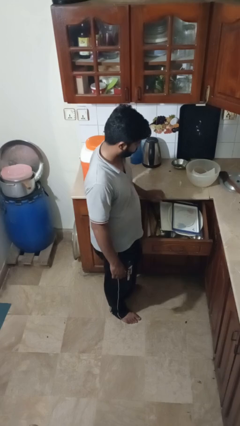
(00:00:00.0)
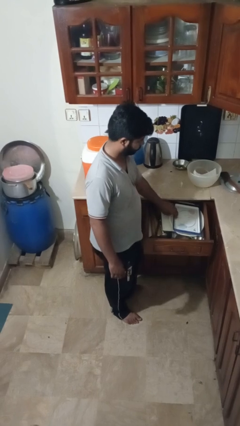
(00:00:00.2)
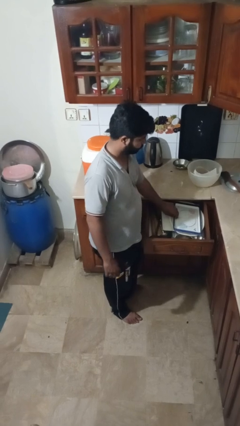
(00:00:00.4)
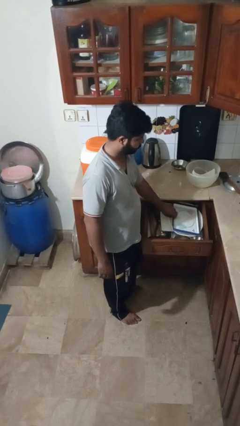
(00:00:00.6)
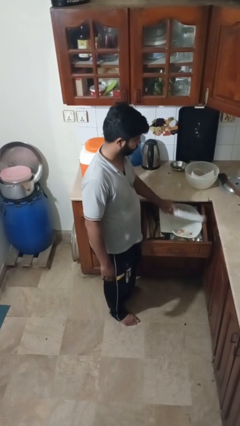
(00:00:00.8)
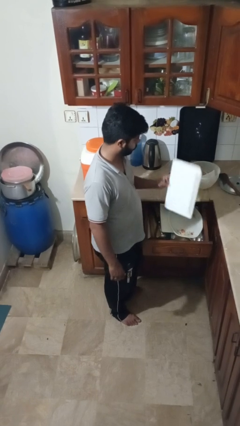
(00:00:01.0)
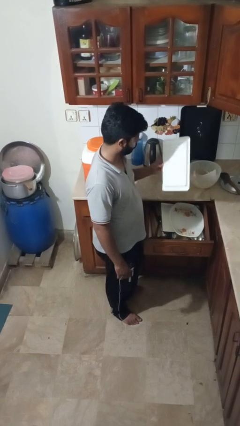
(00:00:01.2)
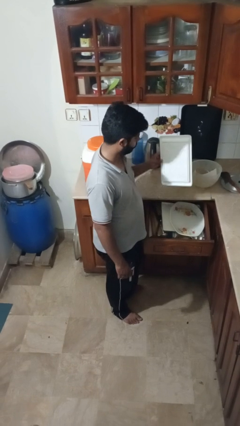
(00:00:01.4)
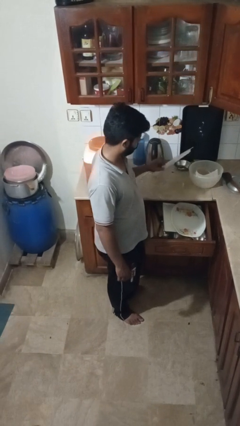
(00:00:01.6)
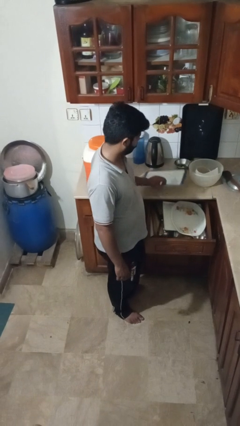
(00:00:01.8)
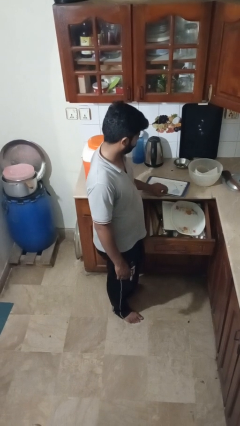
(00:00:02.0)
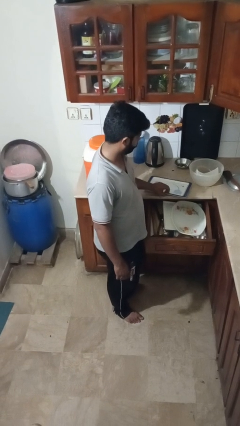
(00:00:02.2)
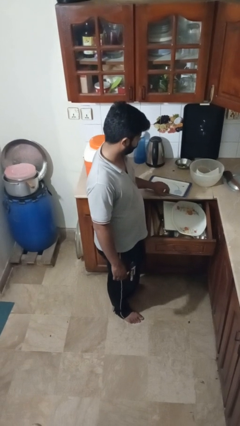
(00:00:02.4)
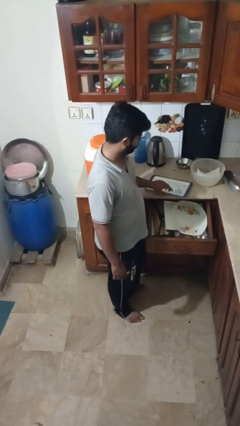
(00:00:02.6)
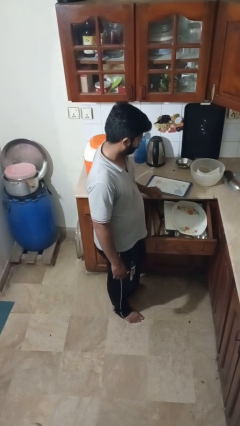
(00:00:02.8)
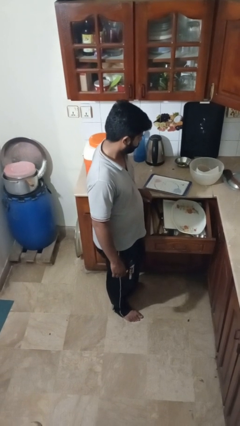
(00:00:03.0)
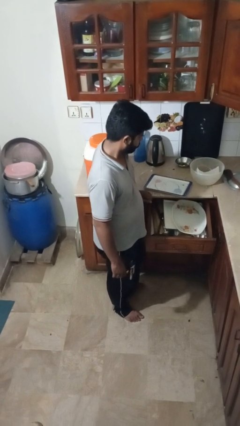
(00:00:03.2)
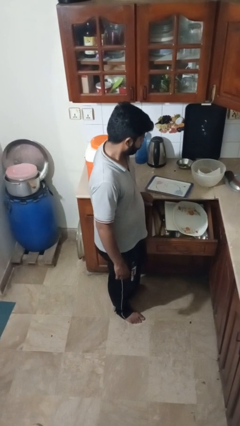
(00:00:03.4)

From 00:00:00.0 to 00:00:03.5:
person takes object from kitchen drawer

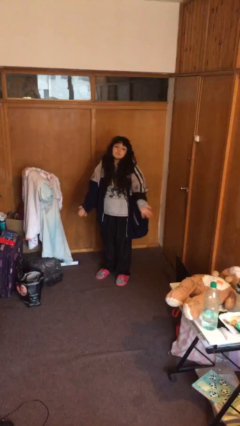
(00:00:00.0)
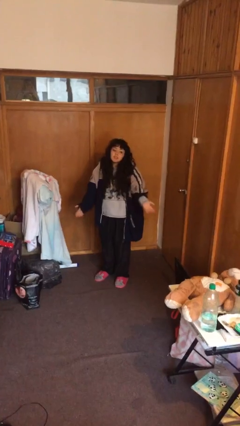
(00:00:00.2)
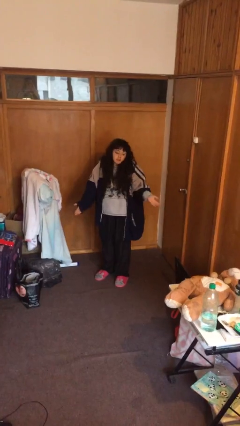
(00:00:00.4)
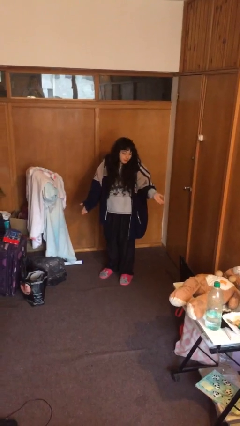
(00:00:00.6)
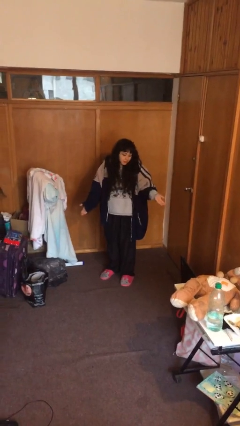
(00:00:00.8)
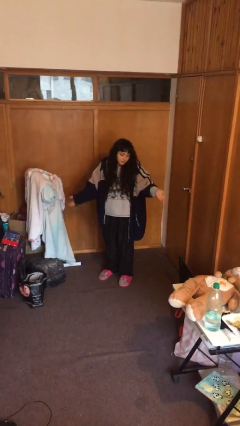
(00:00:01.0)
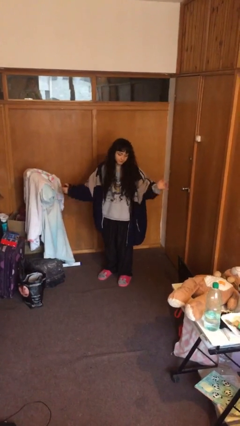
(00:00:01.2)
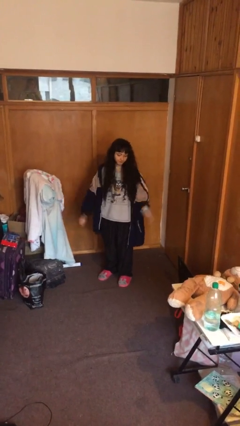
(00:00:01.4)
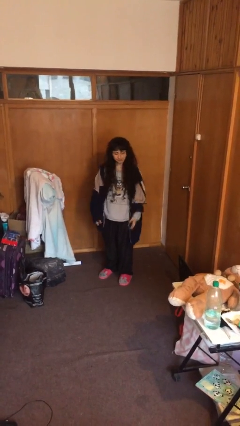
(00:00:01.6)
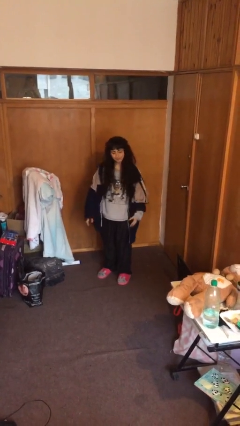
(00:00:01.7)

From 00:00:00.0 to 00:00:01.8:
person shrugs

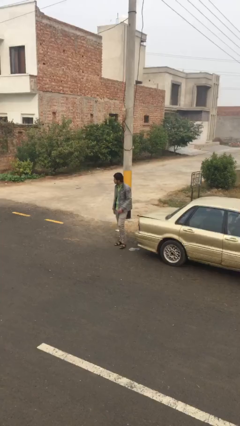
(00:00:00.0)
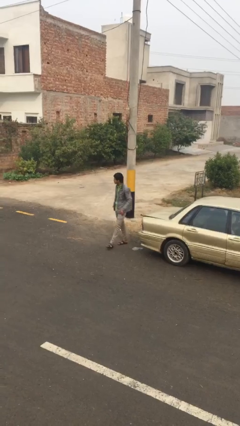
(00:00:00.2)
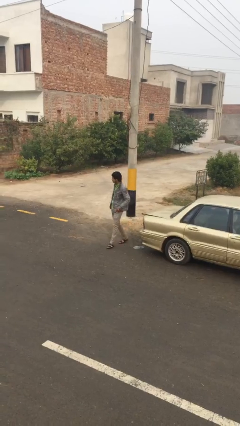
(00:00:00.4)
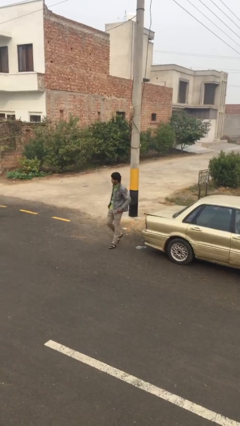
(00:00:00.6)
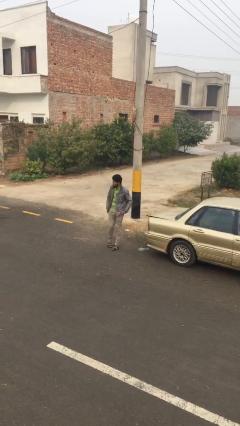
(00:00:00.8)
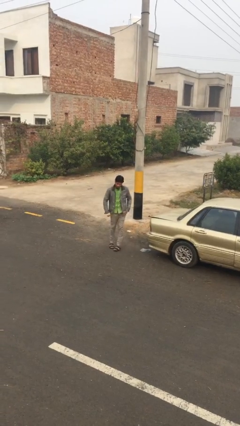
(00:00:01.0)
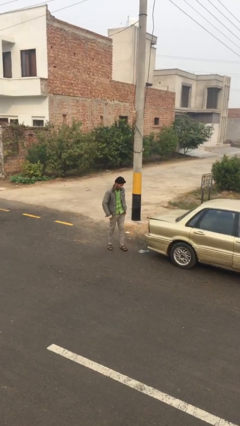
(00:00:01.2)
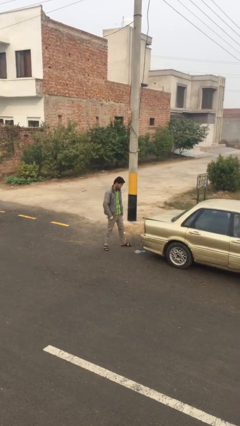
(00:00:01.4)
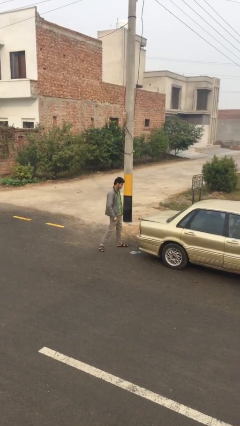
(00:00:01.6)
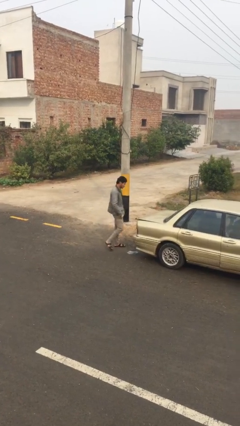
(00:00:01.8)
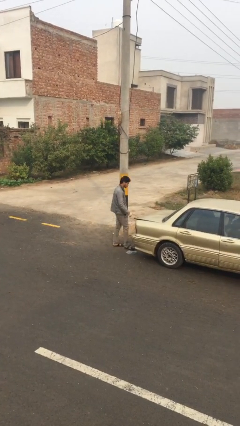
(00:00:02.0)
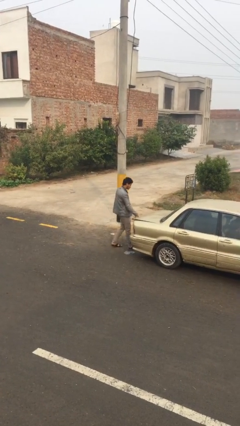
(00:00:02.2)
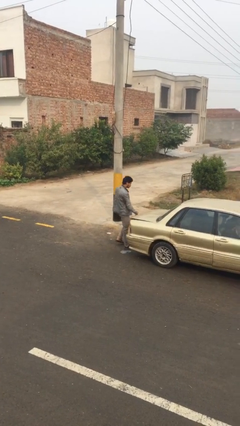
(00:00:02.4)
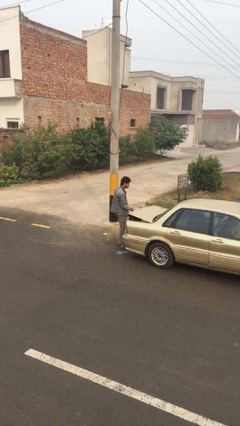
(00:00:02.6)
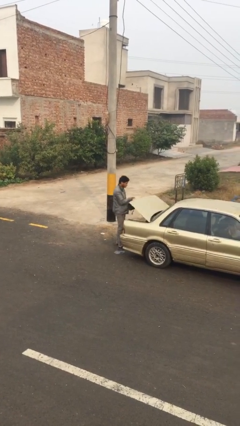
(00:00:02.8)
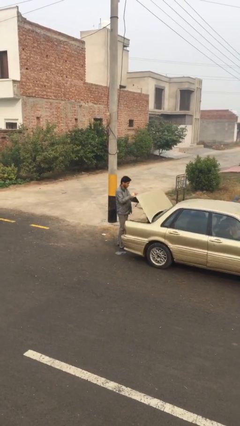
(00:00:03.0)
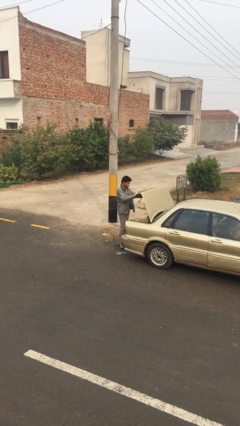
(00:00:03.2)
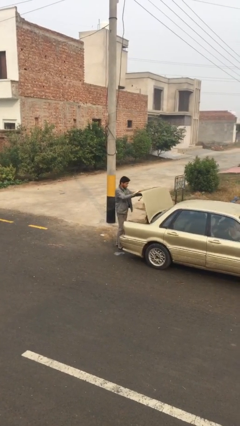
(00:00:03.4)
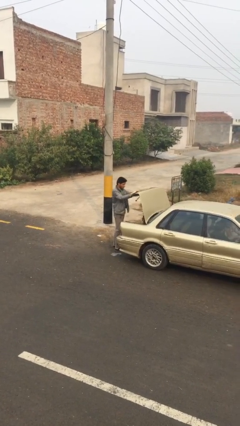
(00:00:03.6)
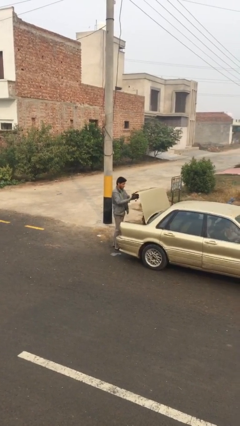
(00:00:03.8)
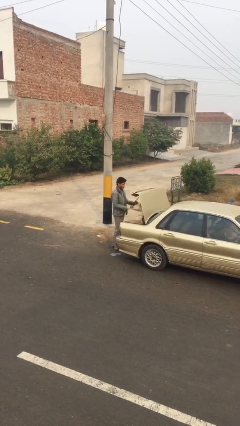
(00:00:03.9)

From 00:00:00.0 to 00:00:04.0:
person opens car trunk

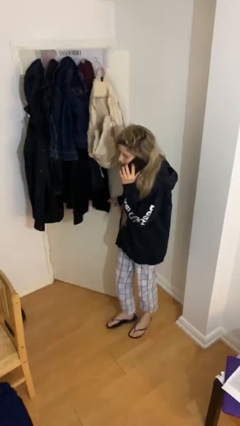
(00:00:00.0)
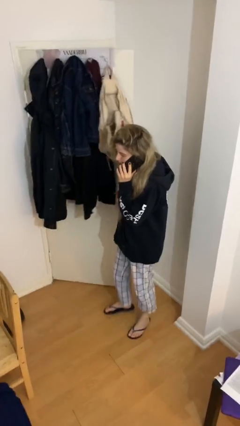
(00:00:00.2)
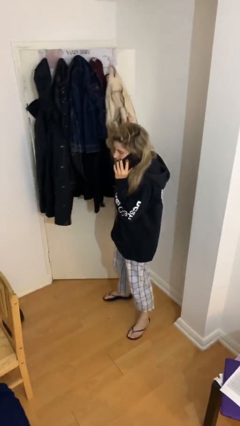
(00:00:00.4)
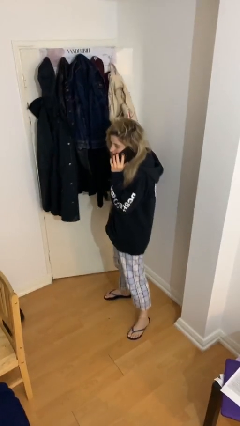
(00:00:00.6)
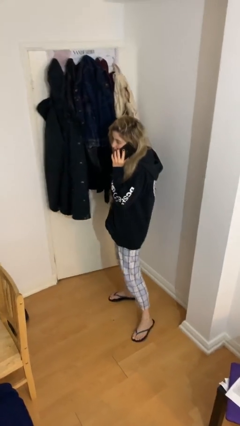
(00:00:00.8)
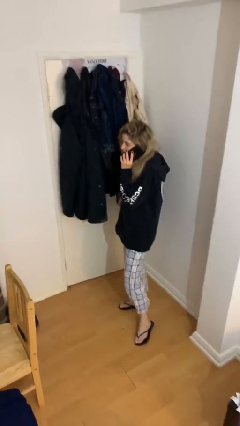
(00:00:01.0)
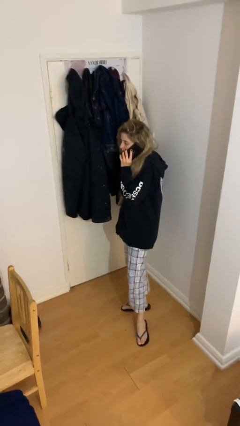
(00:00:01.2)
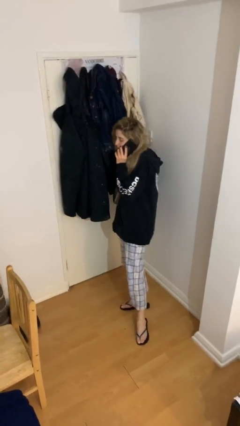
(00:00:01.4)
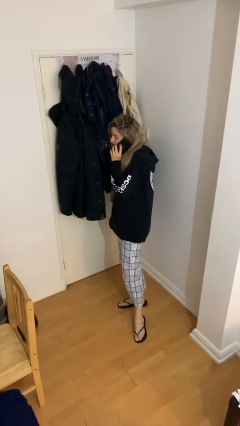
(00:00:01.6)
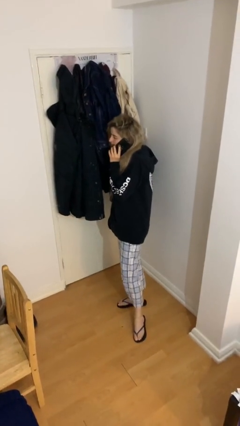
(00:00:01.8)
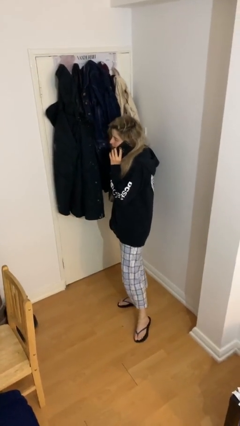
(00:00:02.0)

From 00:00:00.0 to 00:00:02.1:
person closes facility door

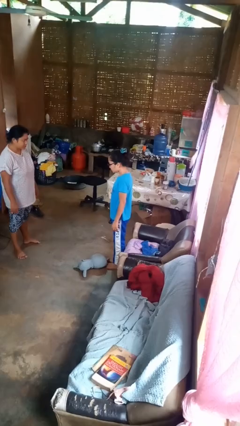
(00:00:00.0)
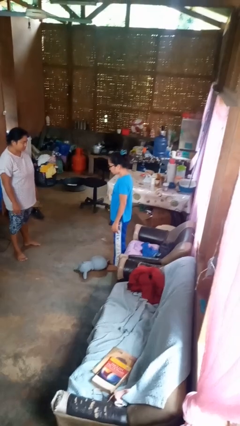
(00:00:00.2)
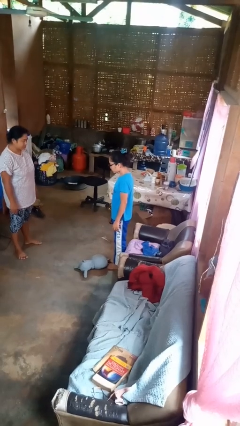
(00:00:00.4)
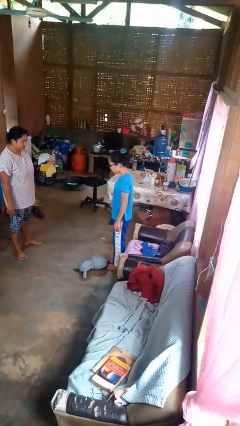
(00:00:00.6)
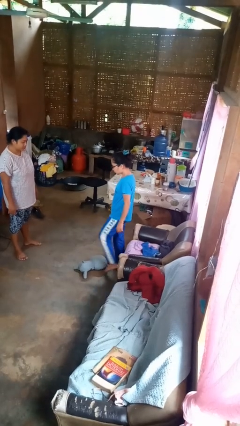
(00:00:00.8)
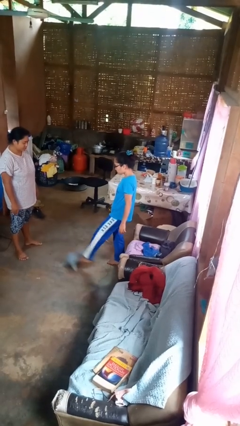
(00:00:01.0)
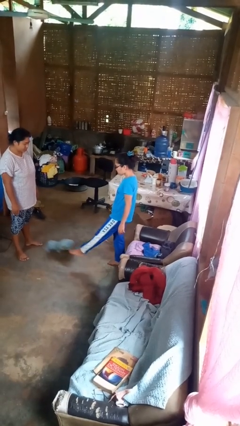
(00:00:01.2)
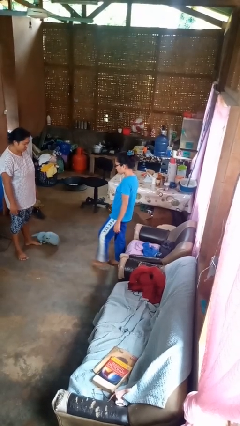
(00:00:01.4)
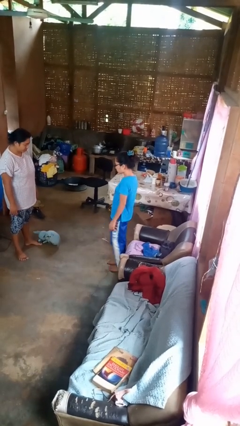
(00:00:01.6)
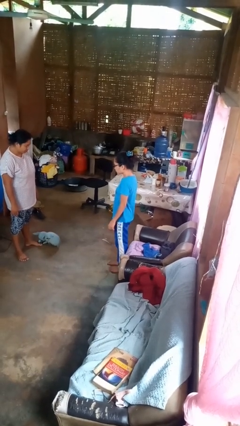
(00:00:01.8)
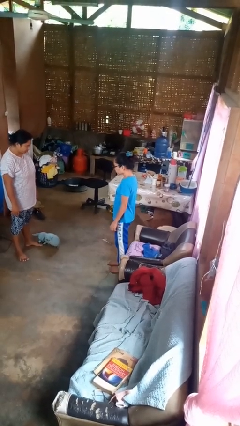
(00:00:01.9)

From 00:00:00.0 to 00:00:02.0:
person kicks object to person

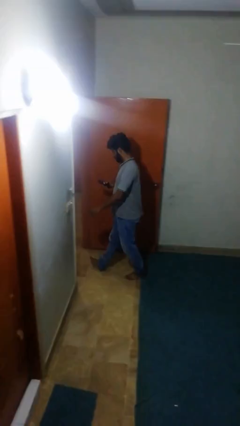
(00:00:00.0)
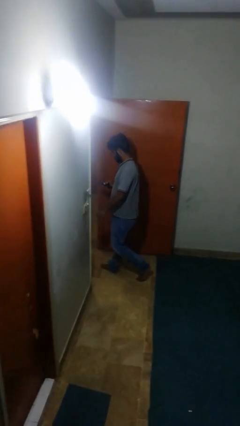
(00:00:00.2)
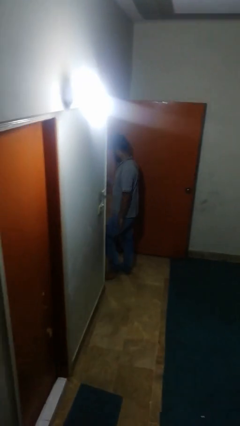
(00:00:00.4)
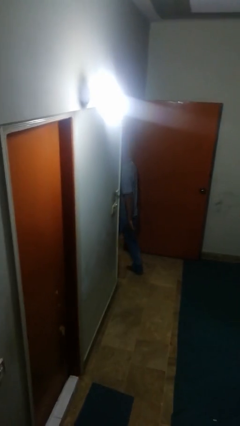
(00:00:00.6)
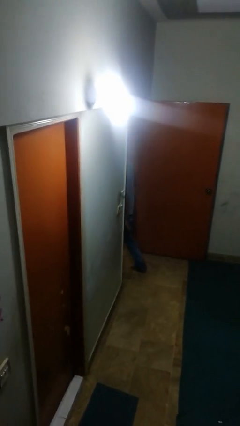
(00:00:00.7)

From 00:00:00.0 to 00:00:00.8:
person exits scene through structure

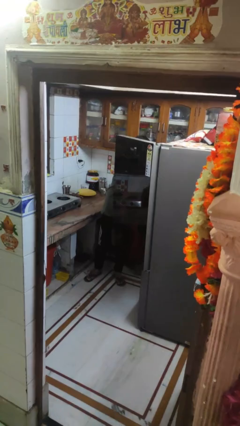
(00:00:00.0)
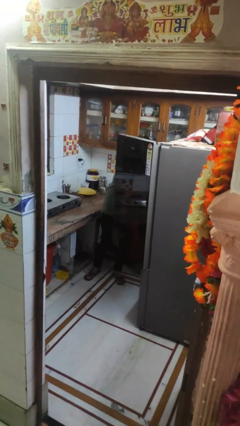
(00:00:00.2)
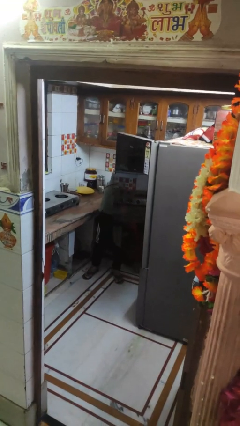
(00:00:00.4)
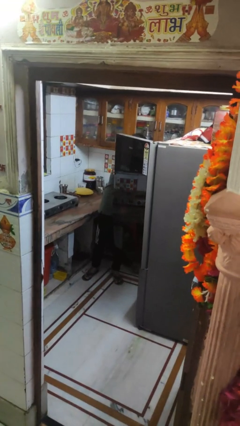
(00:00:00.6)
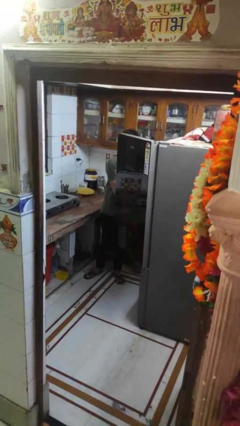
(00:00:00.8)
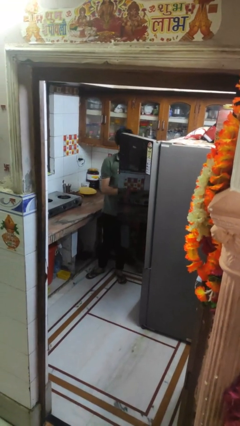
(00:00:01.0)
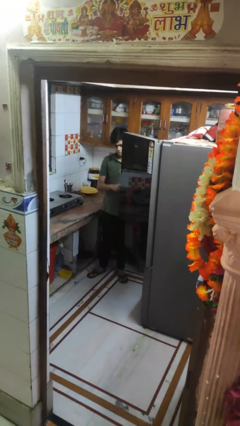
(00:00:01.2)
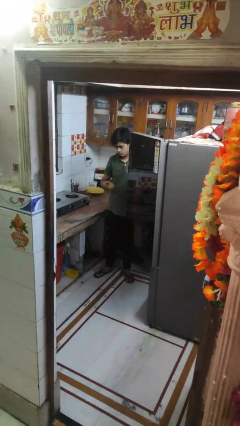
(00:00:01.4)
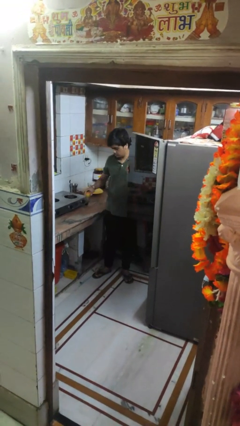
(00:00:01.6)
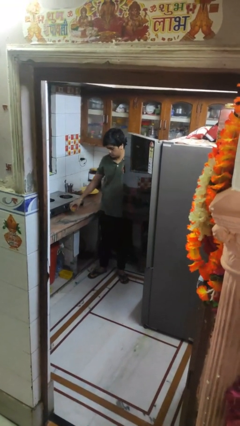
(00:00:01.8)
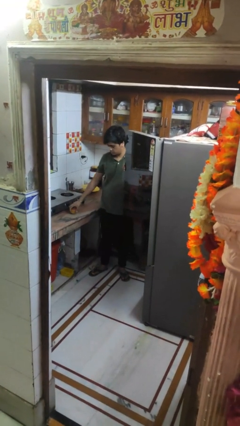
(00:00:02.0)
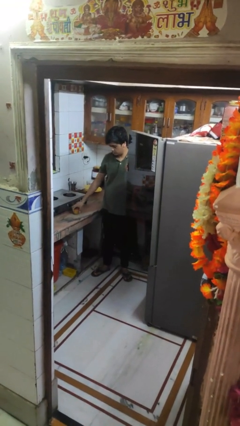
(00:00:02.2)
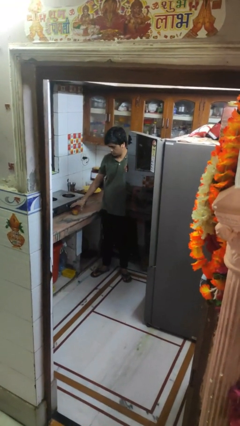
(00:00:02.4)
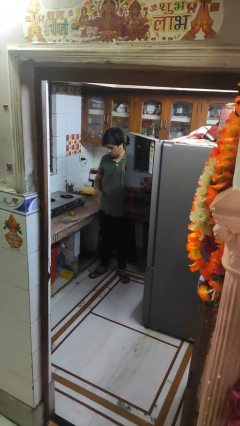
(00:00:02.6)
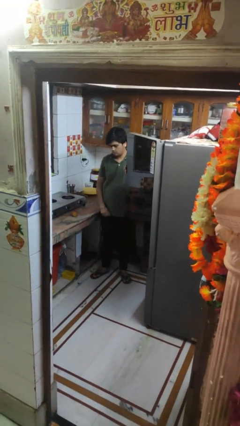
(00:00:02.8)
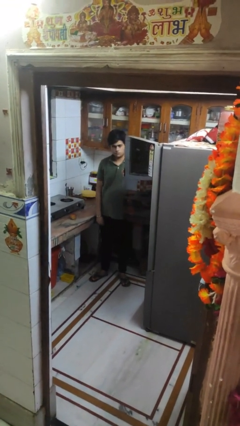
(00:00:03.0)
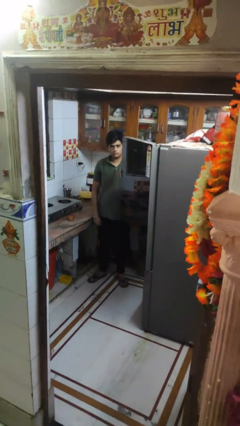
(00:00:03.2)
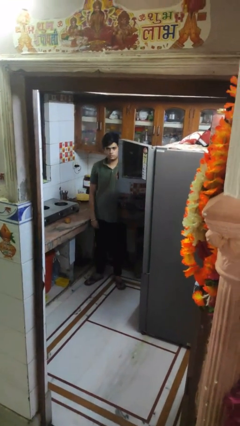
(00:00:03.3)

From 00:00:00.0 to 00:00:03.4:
person takes object from refrigerator
